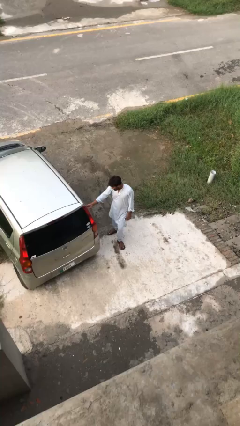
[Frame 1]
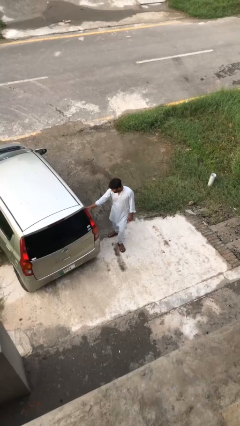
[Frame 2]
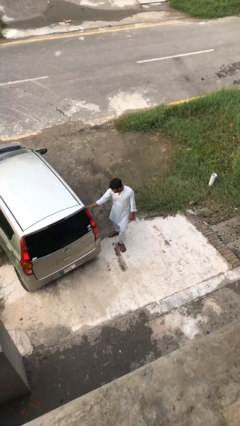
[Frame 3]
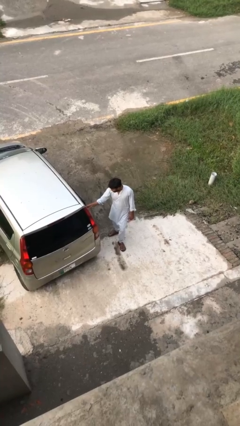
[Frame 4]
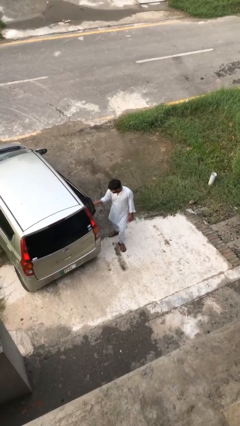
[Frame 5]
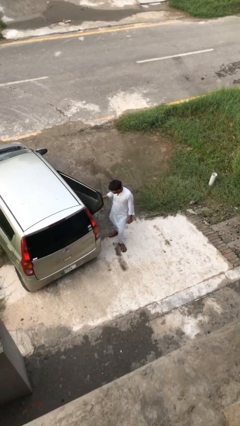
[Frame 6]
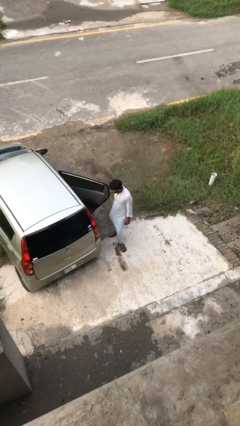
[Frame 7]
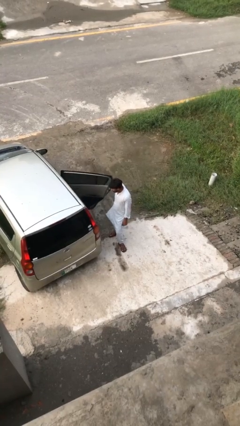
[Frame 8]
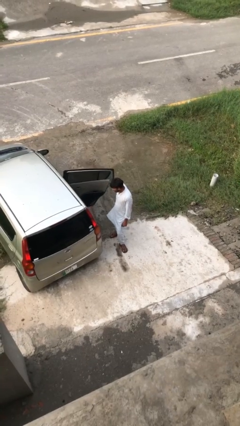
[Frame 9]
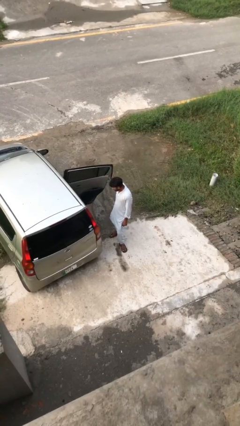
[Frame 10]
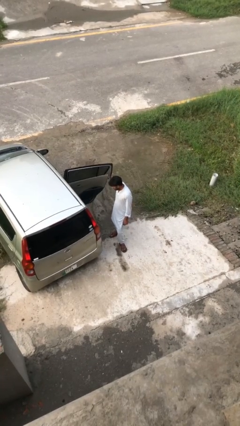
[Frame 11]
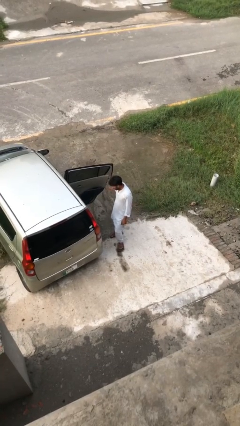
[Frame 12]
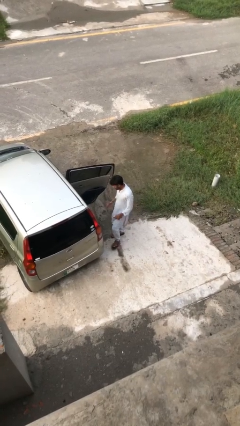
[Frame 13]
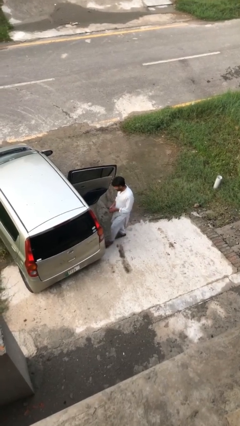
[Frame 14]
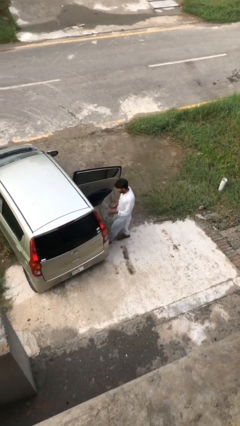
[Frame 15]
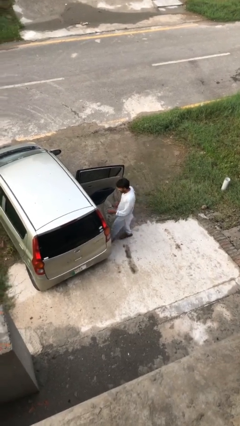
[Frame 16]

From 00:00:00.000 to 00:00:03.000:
person opens car door

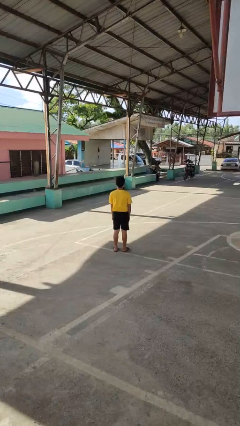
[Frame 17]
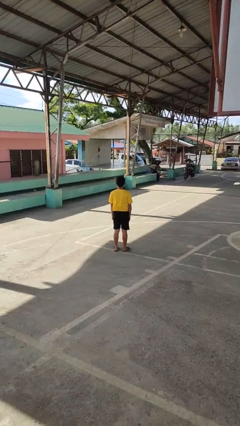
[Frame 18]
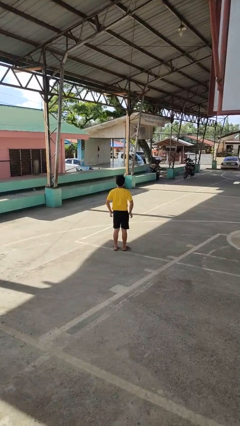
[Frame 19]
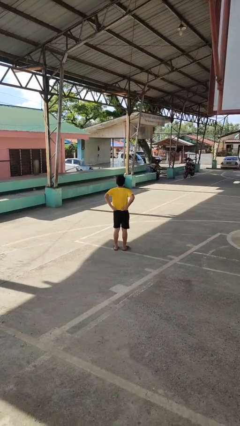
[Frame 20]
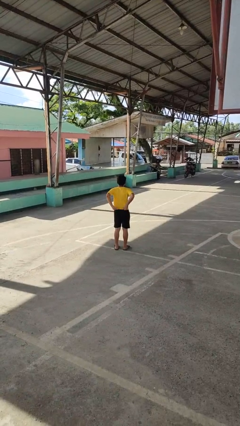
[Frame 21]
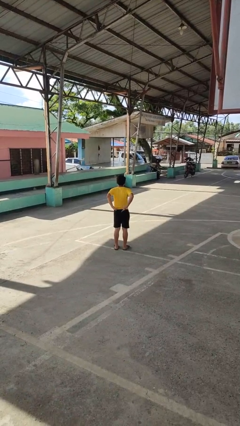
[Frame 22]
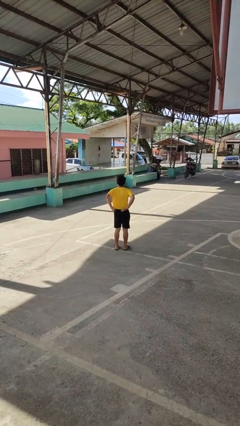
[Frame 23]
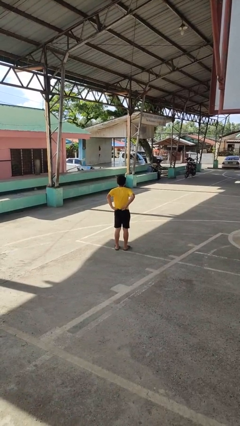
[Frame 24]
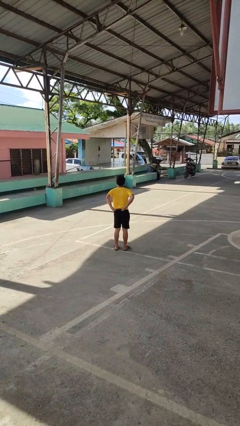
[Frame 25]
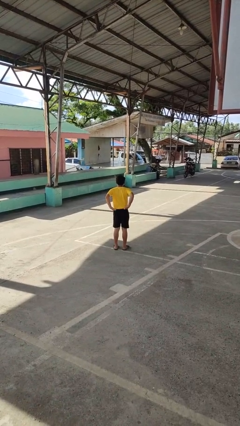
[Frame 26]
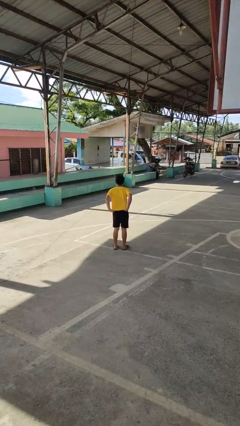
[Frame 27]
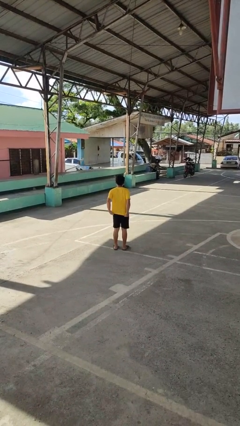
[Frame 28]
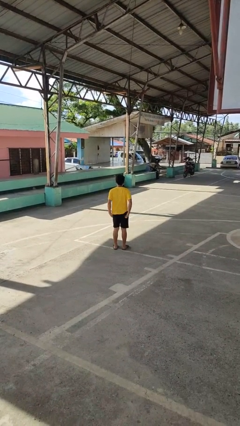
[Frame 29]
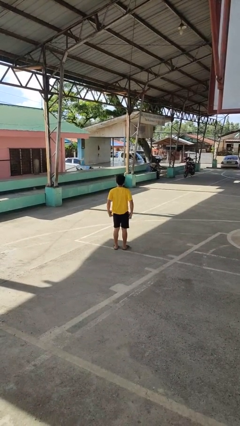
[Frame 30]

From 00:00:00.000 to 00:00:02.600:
person untucks shirt

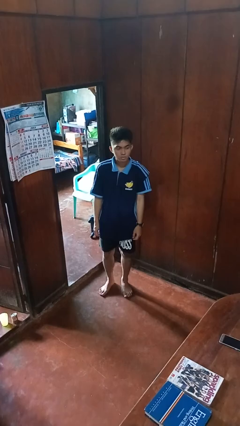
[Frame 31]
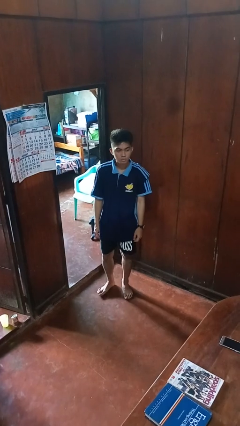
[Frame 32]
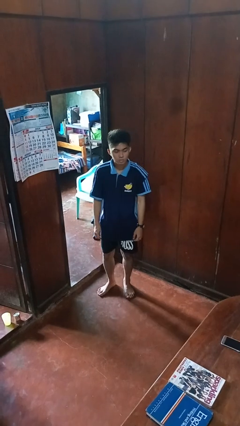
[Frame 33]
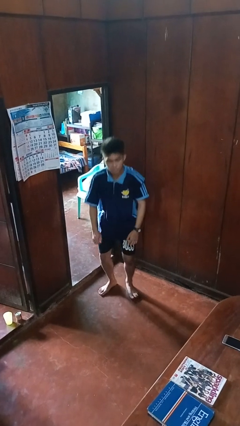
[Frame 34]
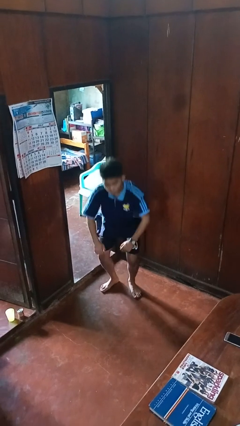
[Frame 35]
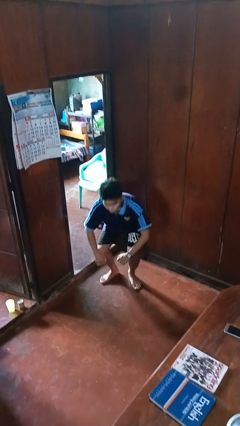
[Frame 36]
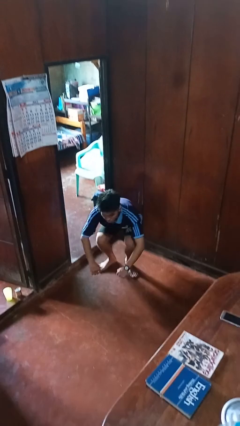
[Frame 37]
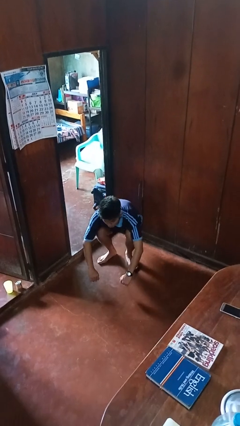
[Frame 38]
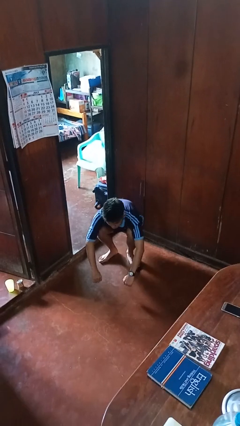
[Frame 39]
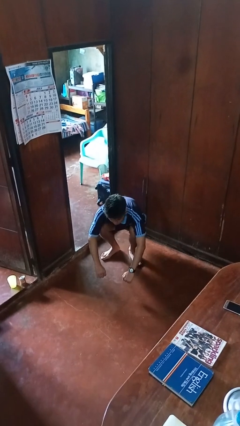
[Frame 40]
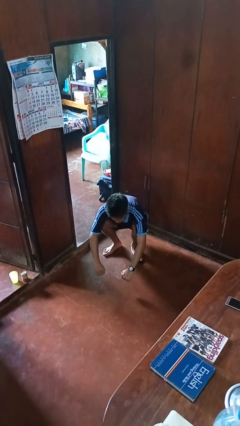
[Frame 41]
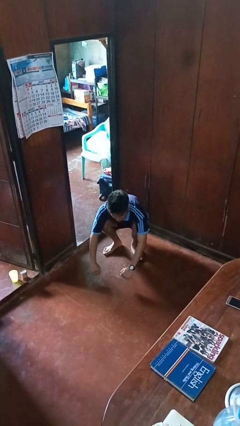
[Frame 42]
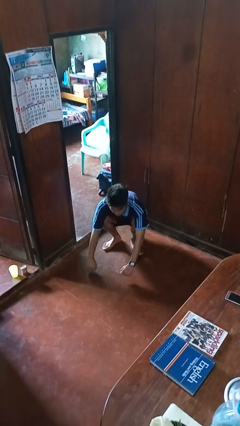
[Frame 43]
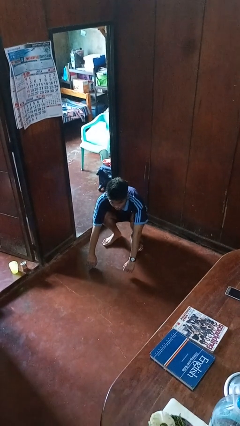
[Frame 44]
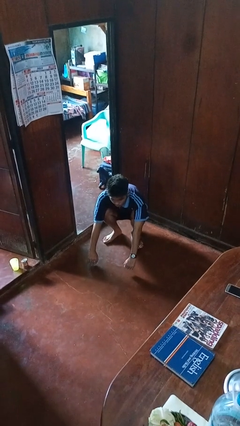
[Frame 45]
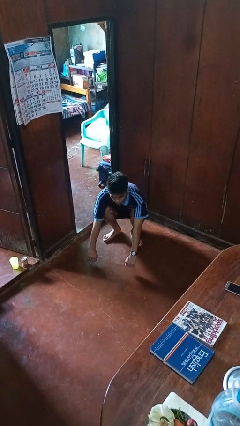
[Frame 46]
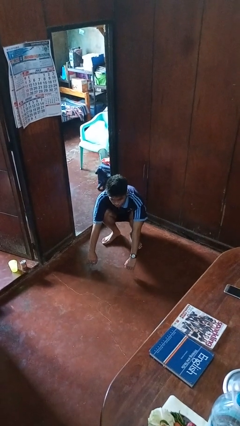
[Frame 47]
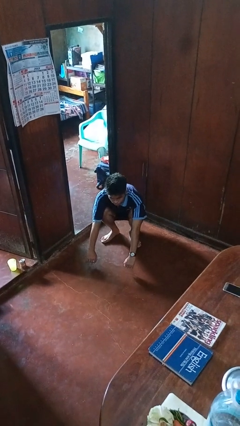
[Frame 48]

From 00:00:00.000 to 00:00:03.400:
person squats

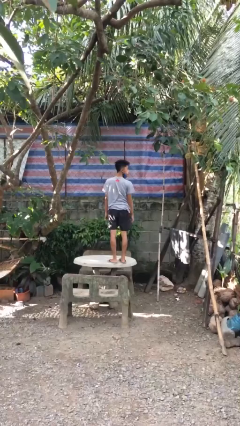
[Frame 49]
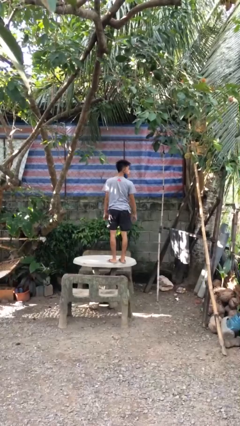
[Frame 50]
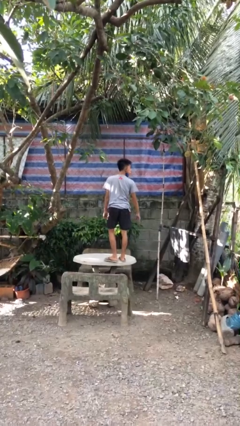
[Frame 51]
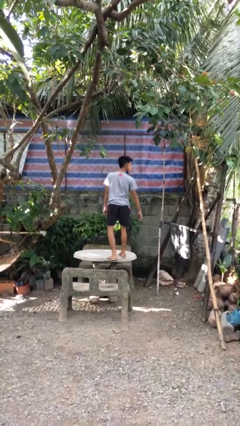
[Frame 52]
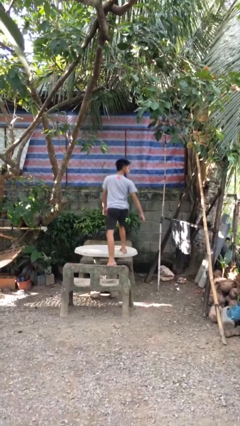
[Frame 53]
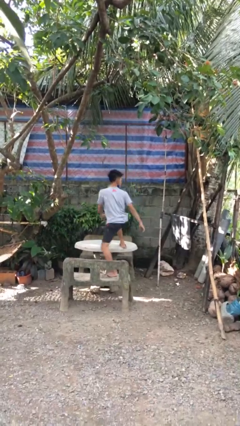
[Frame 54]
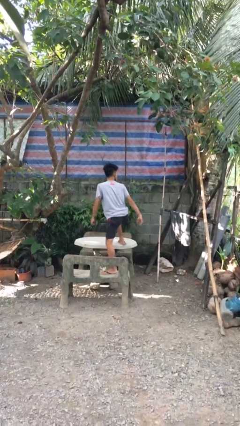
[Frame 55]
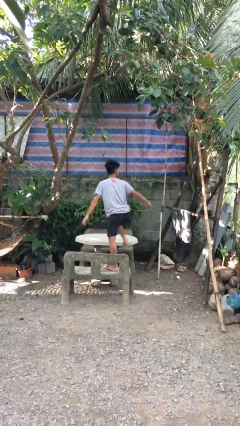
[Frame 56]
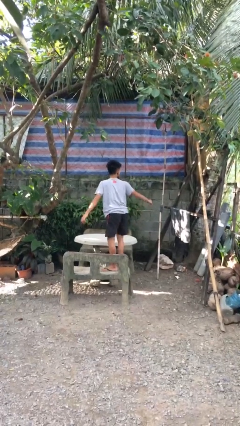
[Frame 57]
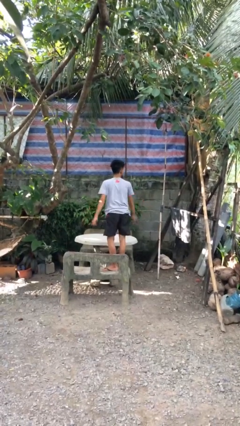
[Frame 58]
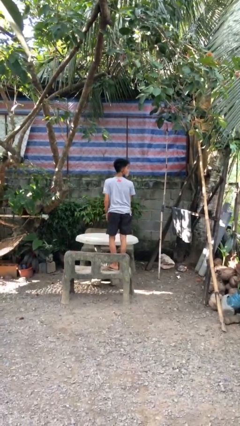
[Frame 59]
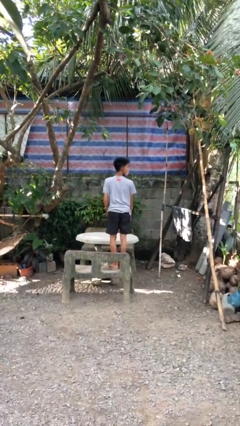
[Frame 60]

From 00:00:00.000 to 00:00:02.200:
person climbs off table

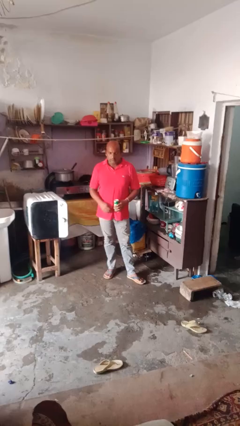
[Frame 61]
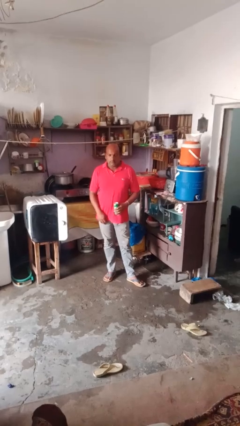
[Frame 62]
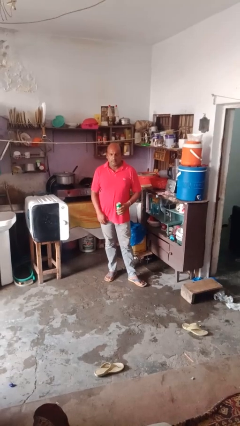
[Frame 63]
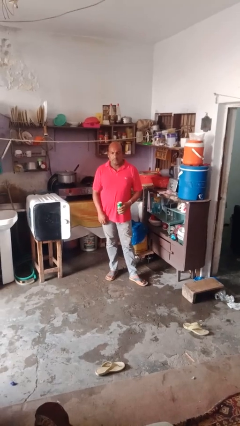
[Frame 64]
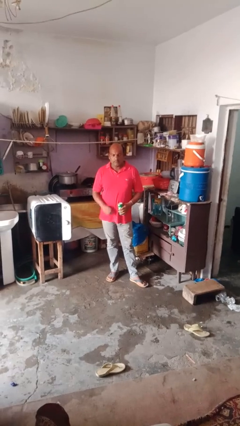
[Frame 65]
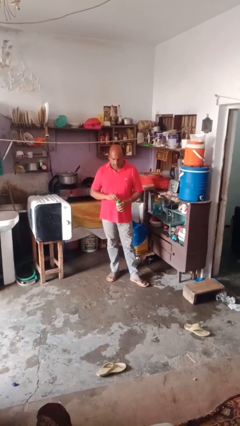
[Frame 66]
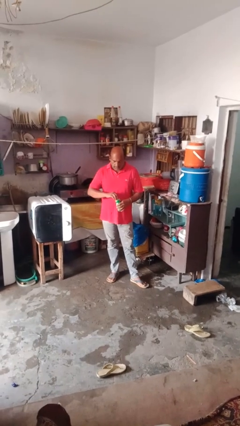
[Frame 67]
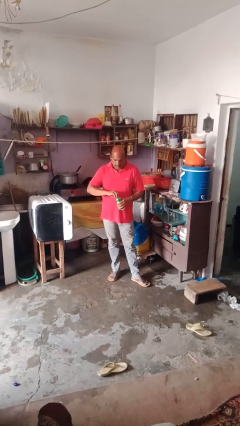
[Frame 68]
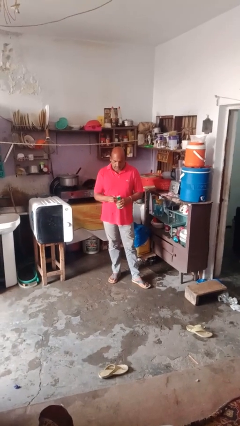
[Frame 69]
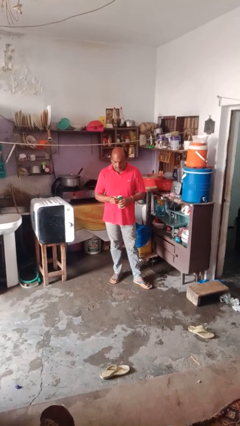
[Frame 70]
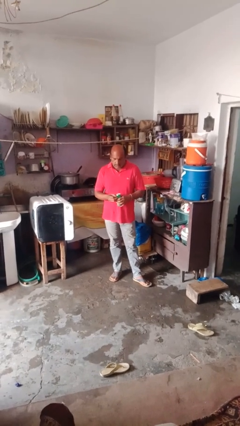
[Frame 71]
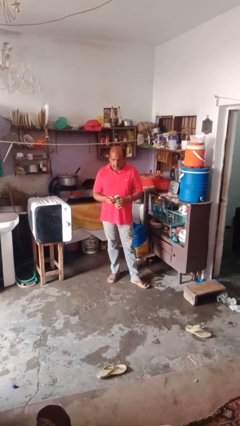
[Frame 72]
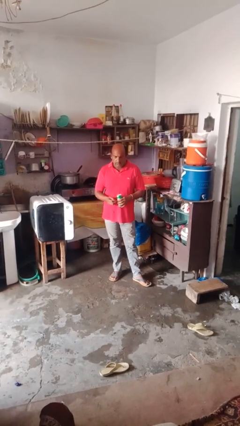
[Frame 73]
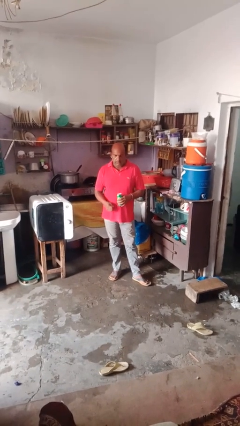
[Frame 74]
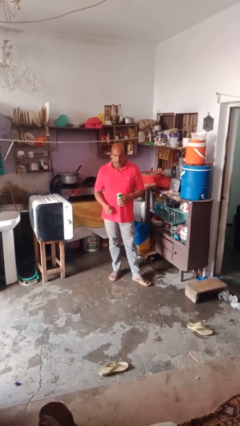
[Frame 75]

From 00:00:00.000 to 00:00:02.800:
person opens beverage can

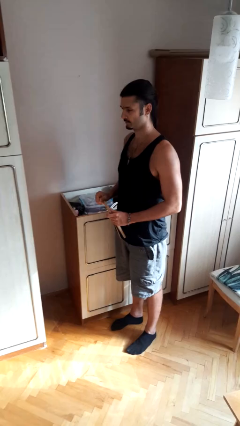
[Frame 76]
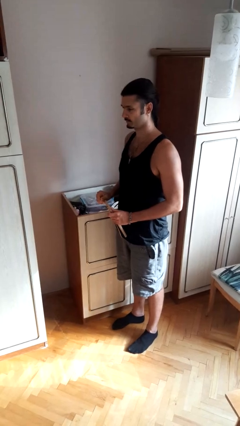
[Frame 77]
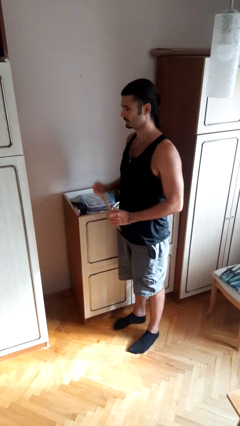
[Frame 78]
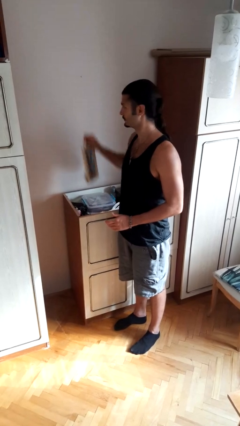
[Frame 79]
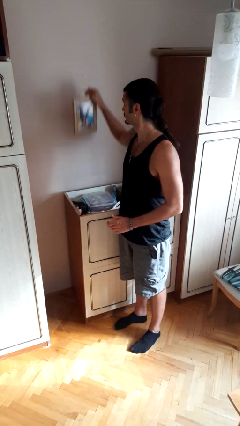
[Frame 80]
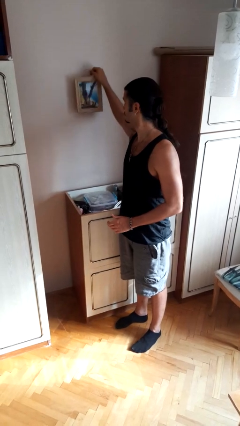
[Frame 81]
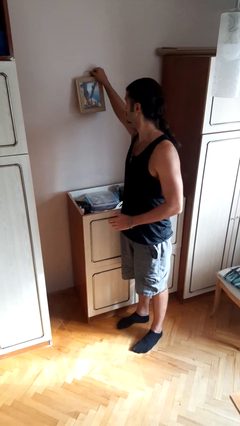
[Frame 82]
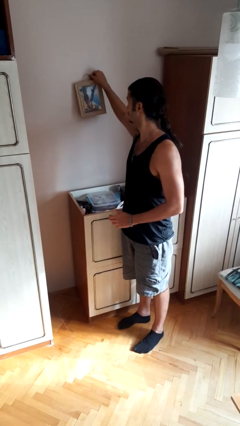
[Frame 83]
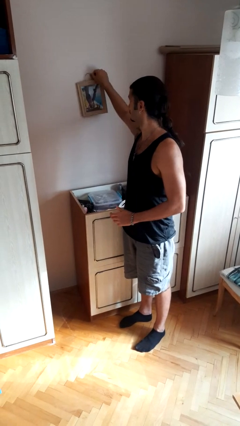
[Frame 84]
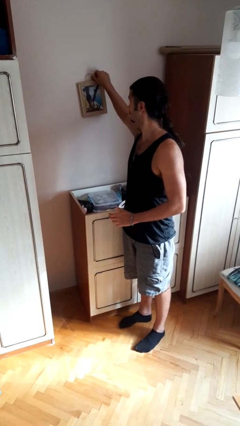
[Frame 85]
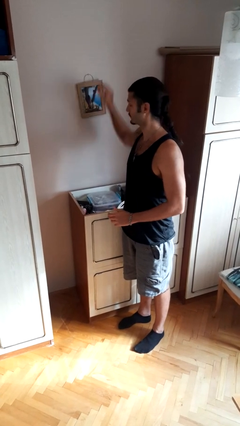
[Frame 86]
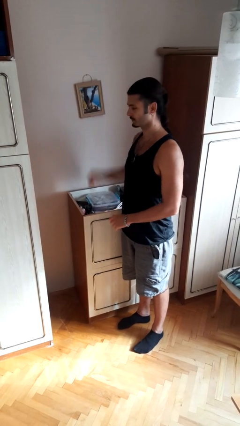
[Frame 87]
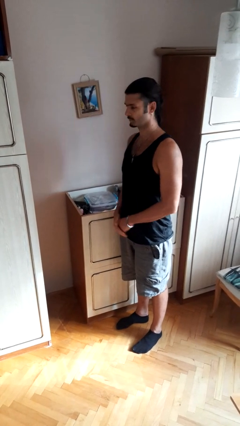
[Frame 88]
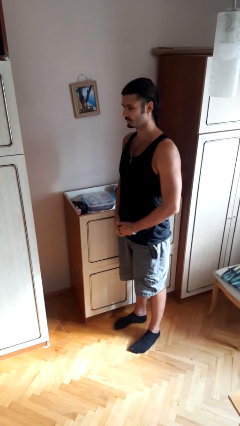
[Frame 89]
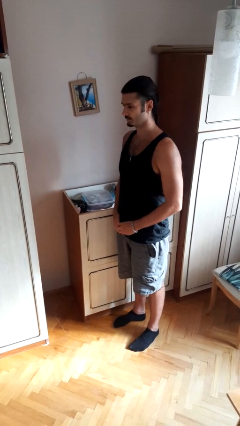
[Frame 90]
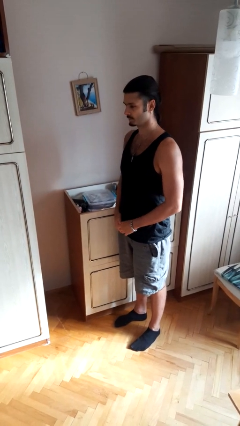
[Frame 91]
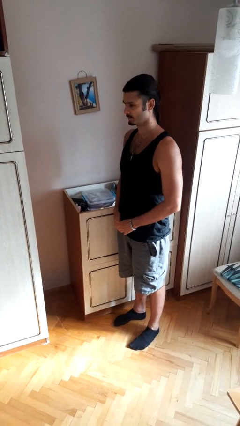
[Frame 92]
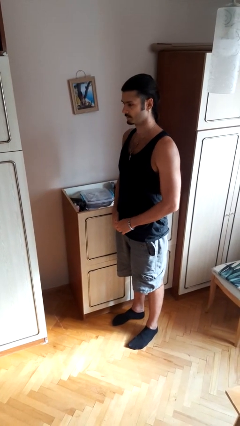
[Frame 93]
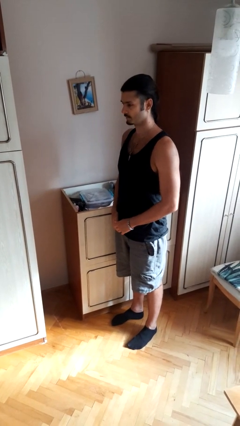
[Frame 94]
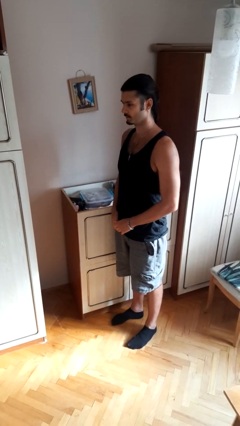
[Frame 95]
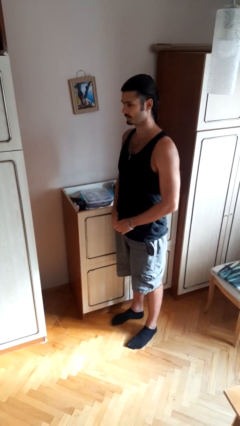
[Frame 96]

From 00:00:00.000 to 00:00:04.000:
person puts up picture frame
